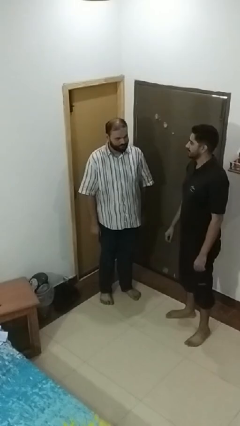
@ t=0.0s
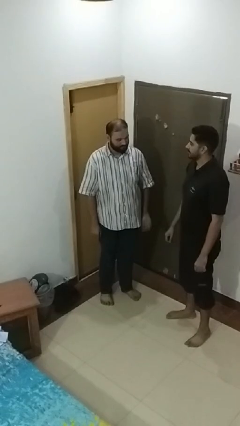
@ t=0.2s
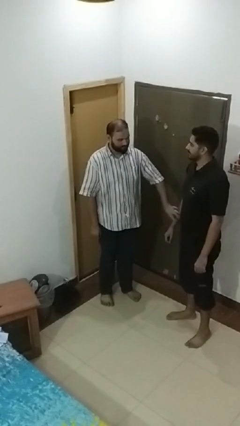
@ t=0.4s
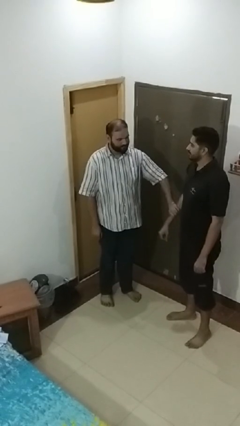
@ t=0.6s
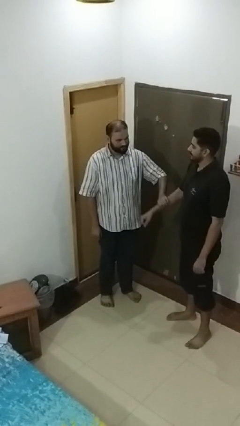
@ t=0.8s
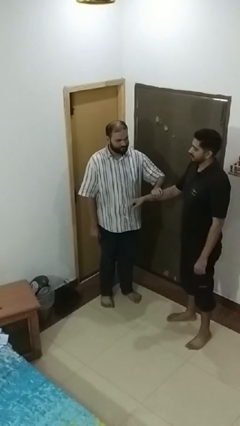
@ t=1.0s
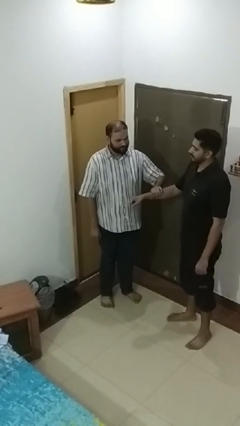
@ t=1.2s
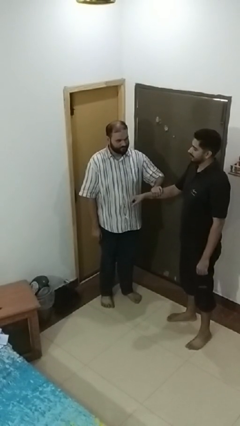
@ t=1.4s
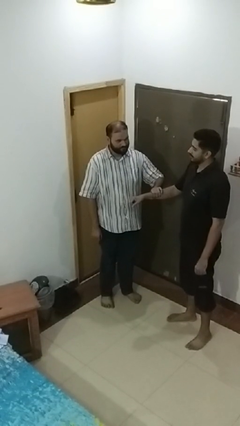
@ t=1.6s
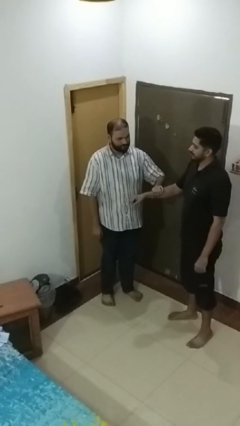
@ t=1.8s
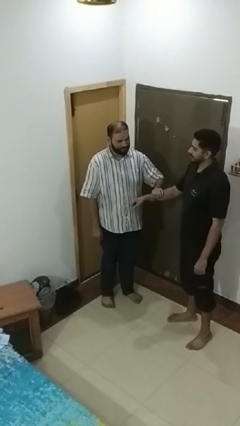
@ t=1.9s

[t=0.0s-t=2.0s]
person grabs person by forearm

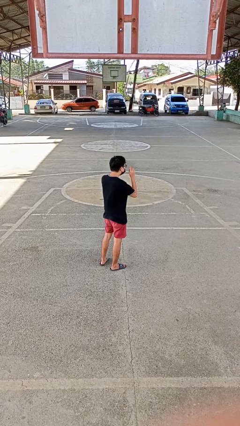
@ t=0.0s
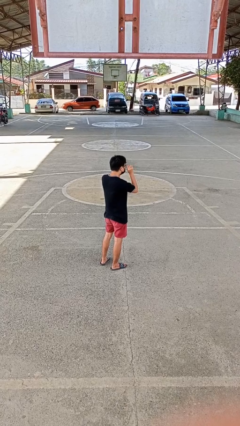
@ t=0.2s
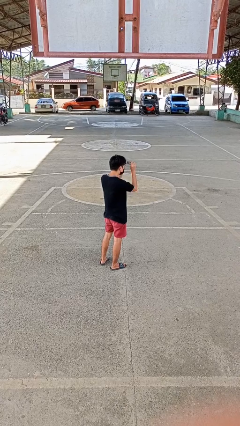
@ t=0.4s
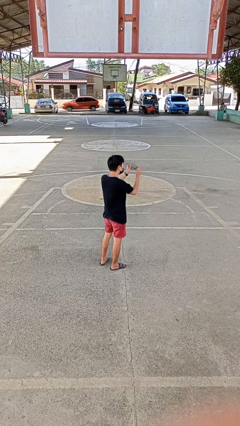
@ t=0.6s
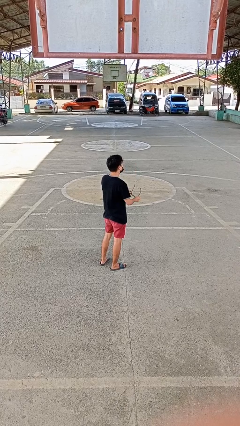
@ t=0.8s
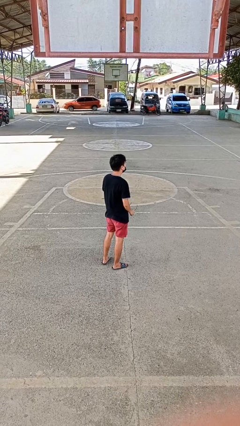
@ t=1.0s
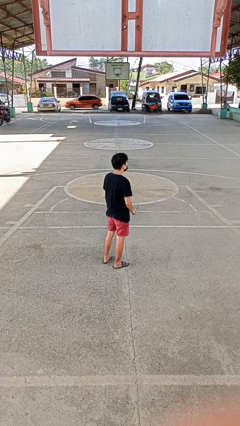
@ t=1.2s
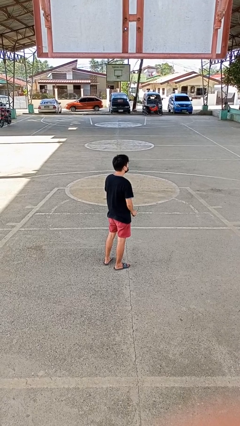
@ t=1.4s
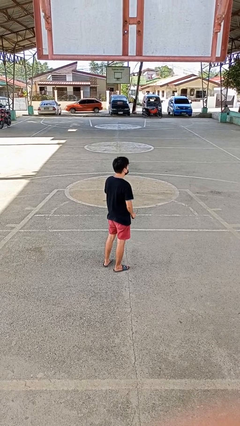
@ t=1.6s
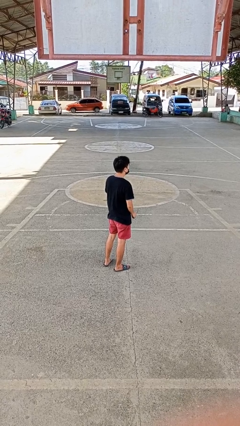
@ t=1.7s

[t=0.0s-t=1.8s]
person takes off glasses

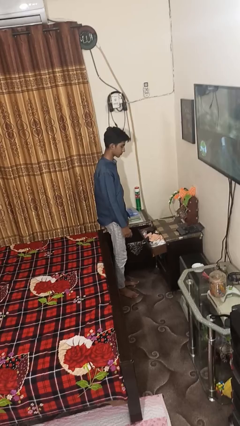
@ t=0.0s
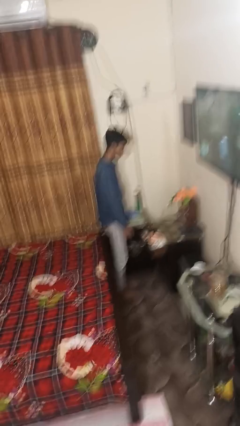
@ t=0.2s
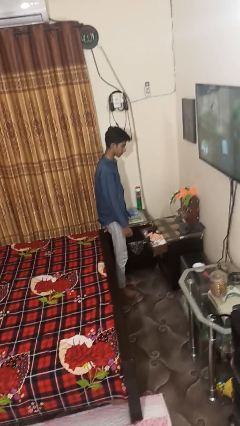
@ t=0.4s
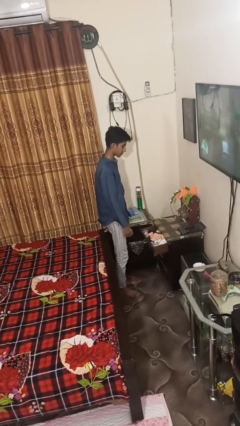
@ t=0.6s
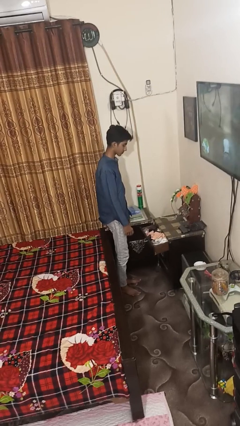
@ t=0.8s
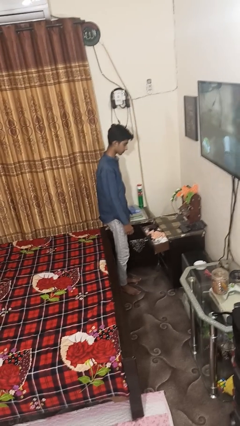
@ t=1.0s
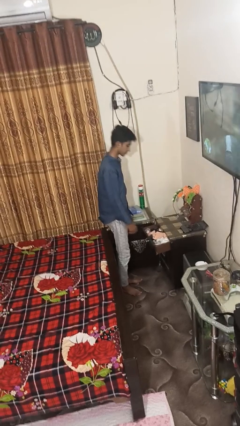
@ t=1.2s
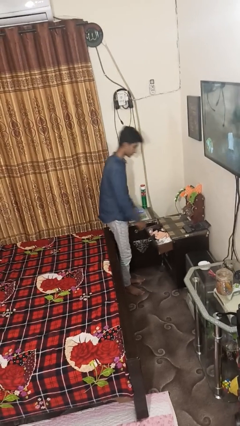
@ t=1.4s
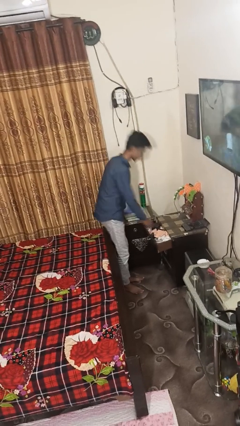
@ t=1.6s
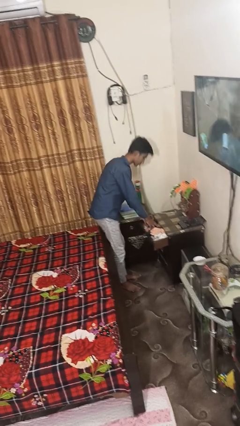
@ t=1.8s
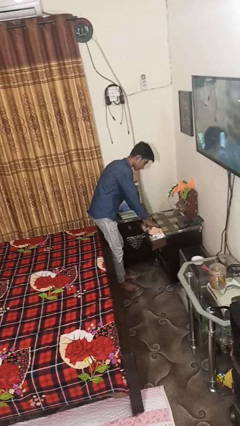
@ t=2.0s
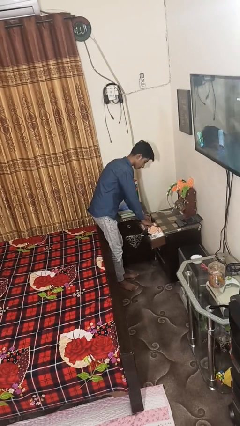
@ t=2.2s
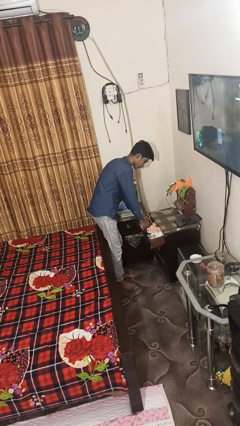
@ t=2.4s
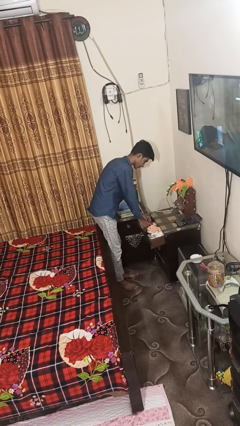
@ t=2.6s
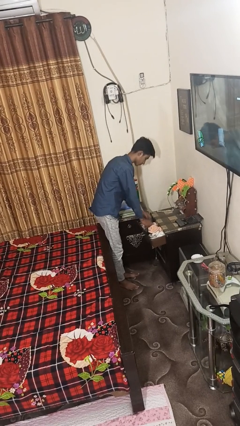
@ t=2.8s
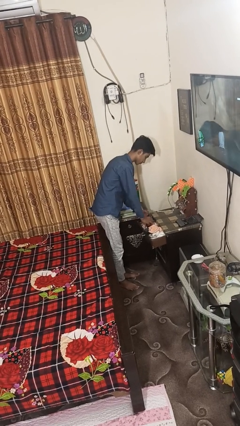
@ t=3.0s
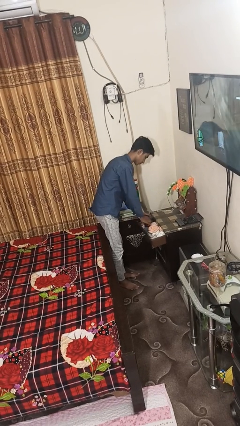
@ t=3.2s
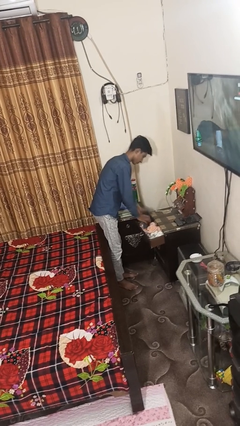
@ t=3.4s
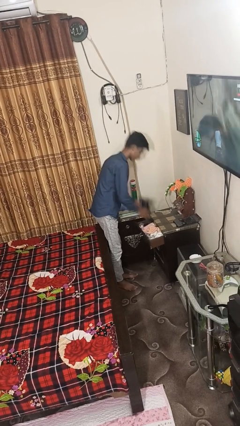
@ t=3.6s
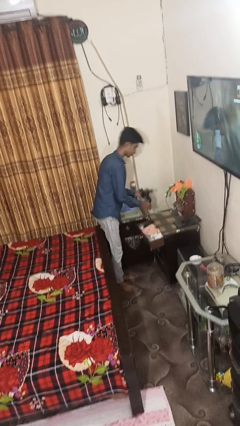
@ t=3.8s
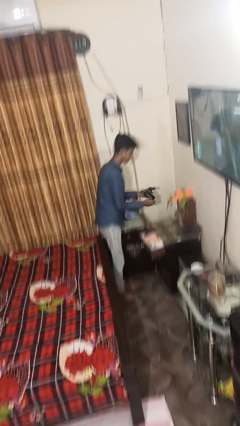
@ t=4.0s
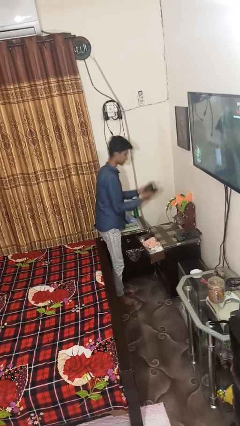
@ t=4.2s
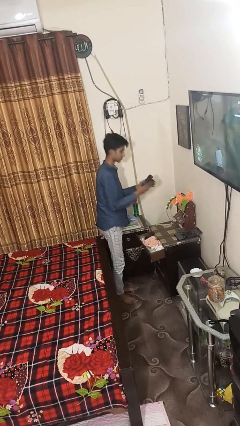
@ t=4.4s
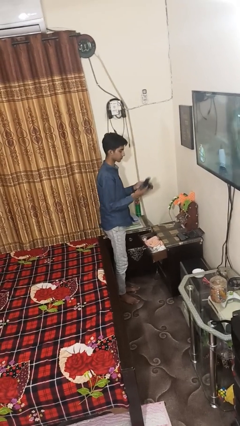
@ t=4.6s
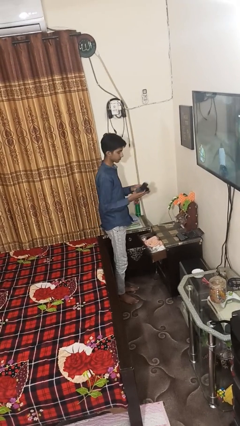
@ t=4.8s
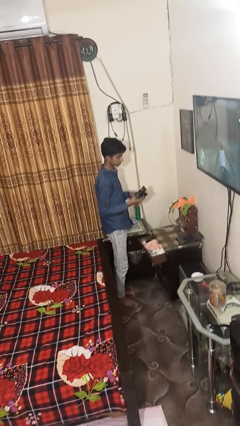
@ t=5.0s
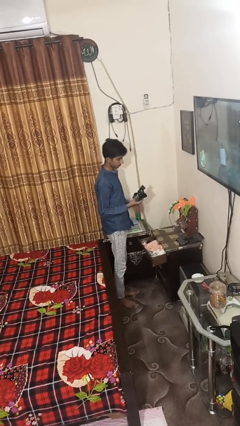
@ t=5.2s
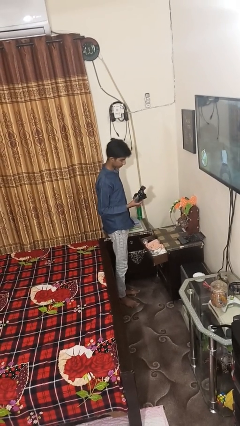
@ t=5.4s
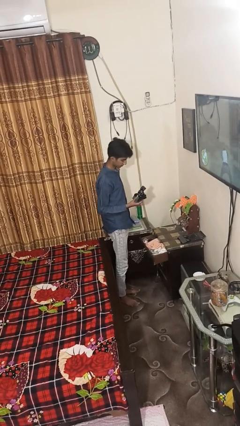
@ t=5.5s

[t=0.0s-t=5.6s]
person takes clothes from dresser

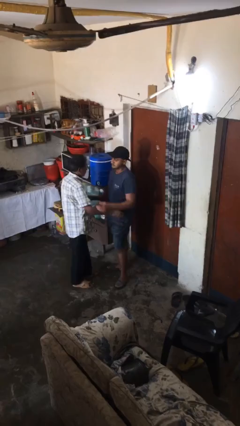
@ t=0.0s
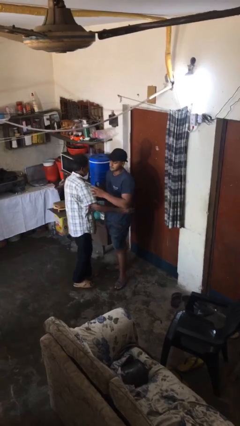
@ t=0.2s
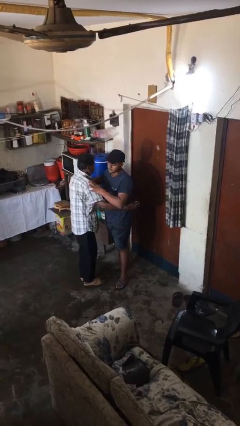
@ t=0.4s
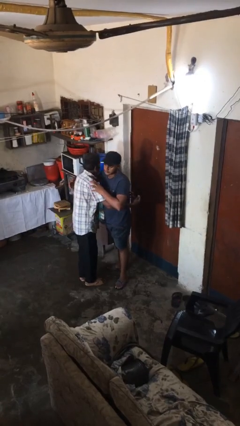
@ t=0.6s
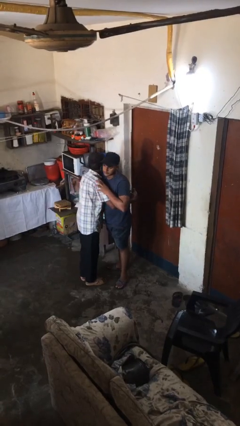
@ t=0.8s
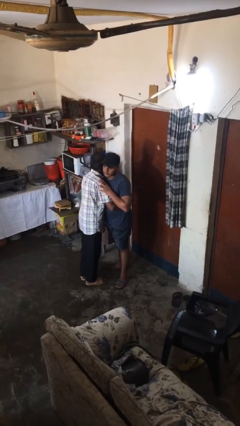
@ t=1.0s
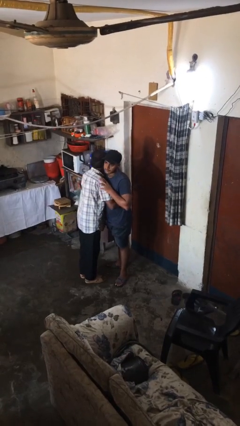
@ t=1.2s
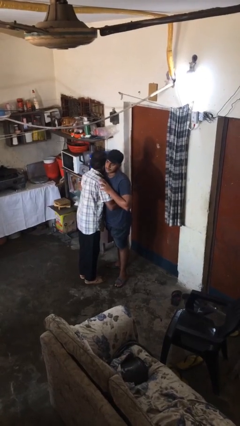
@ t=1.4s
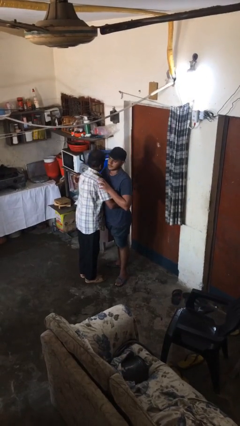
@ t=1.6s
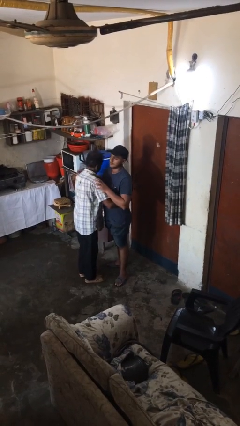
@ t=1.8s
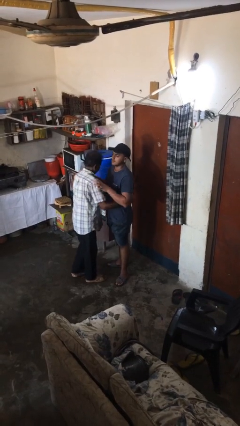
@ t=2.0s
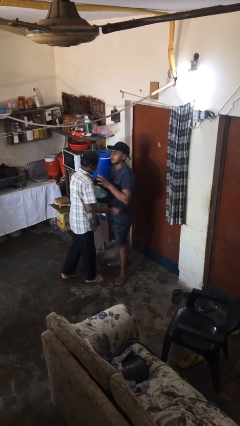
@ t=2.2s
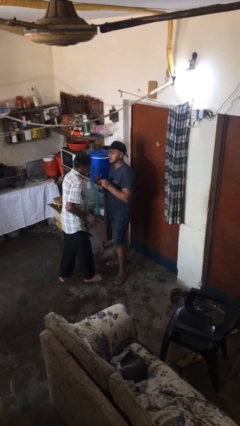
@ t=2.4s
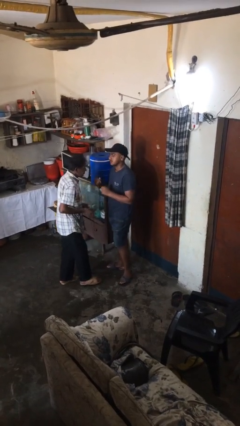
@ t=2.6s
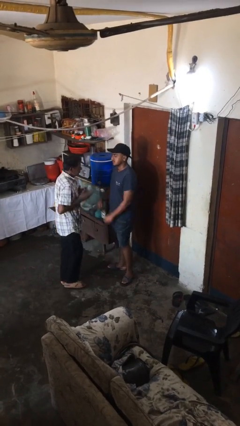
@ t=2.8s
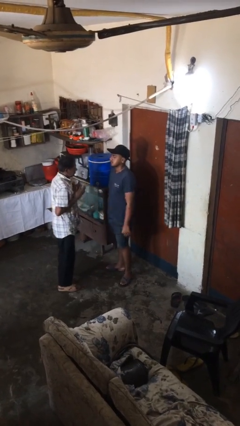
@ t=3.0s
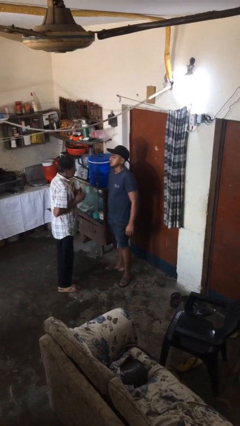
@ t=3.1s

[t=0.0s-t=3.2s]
person embraces person

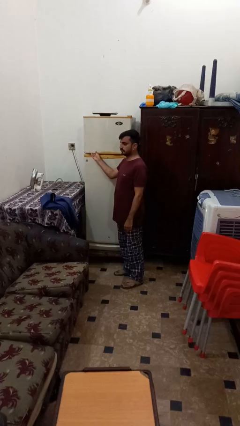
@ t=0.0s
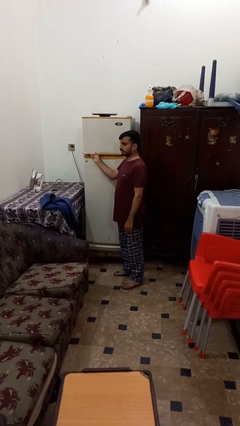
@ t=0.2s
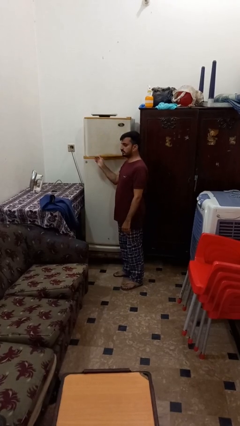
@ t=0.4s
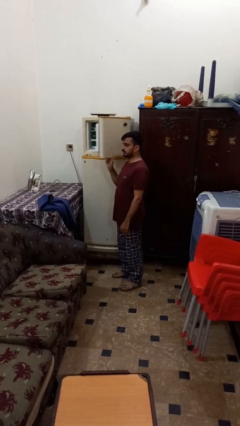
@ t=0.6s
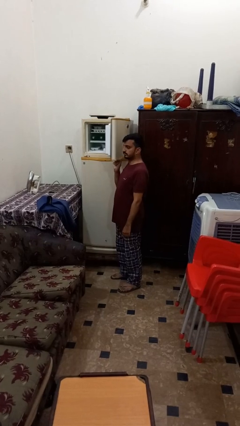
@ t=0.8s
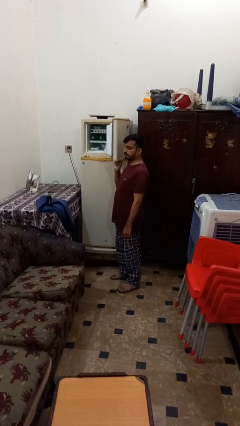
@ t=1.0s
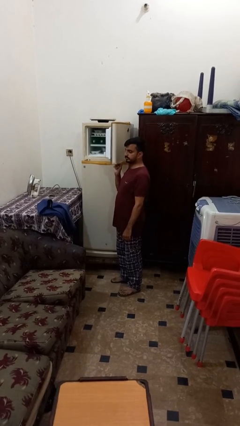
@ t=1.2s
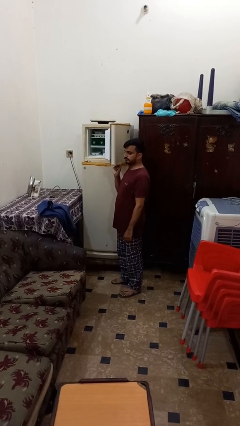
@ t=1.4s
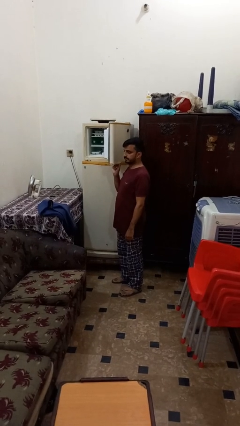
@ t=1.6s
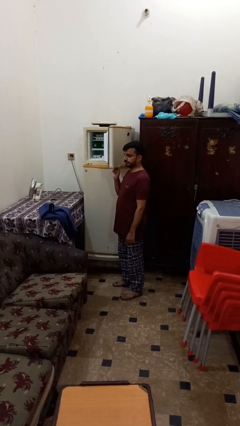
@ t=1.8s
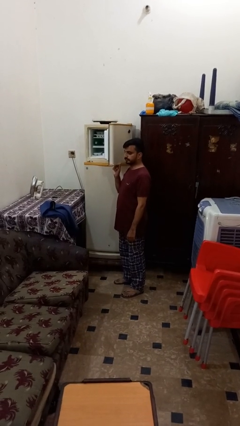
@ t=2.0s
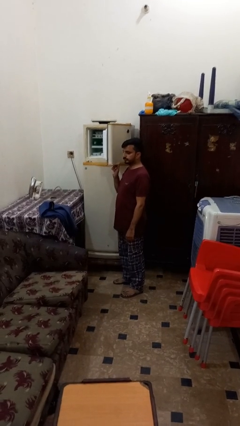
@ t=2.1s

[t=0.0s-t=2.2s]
person opens refrigerator

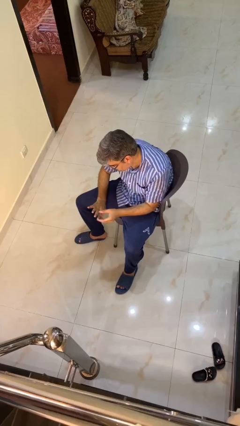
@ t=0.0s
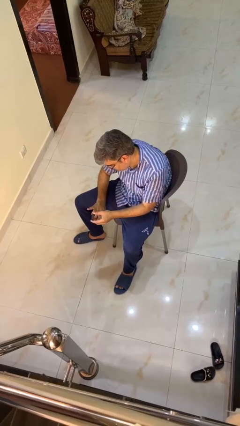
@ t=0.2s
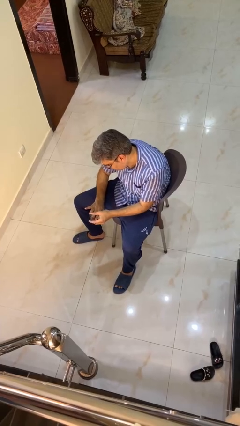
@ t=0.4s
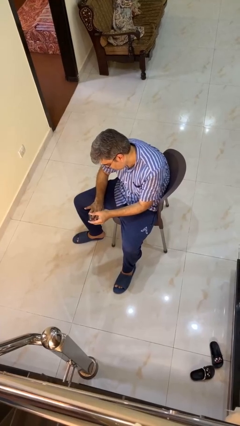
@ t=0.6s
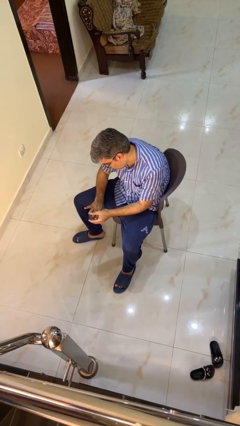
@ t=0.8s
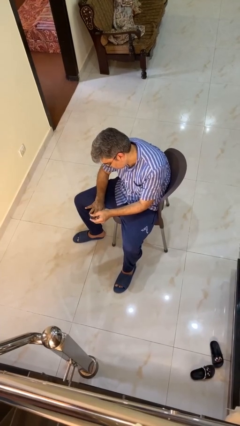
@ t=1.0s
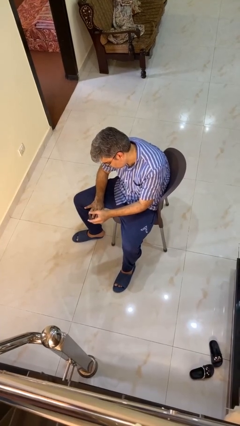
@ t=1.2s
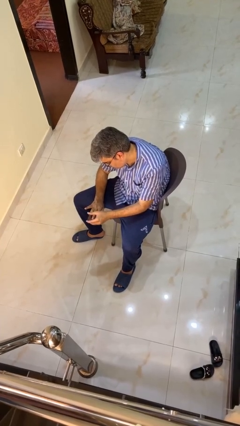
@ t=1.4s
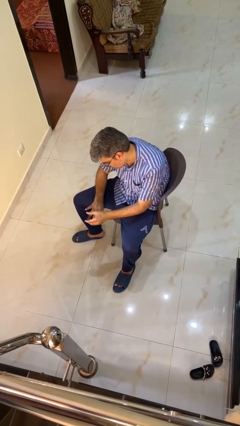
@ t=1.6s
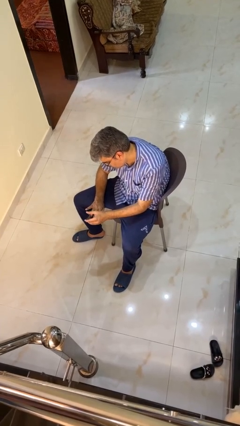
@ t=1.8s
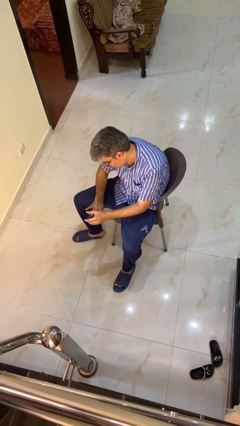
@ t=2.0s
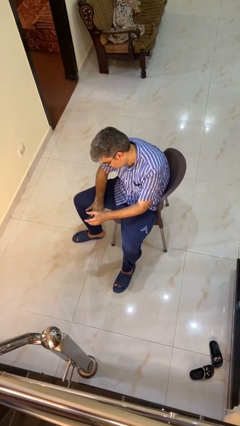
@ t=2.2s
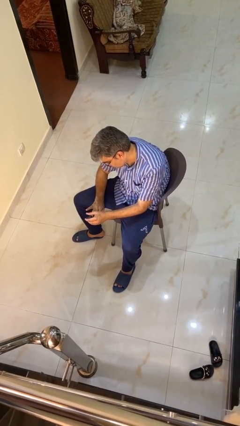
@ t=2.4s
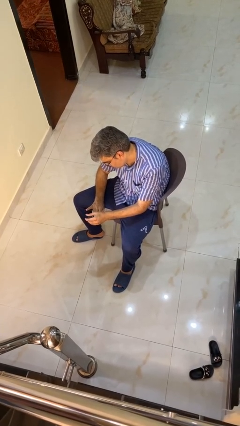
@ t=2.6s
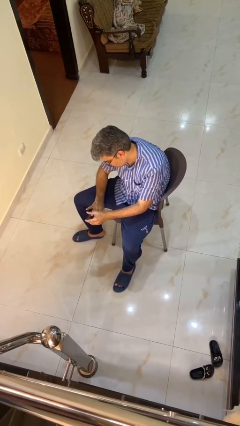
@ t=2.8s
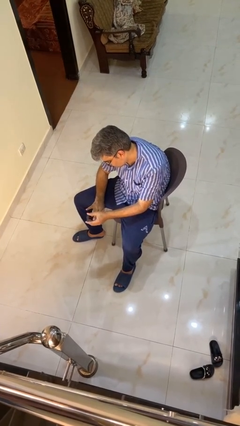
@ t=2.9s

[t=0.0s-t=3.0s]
person clips fingernails
